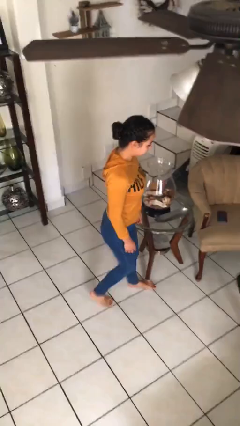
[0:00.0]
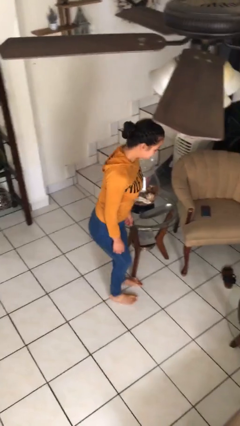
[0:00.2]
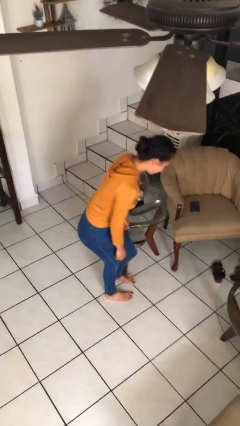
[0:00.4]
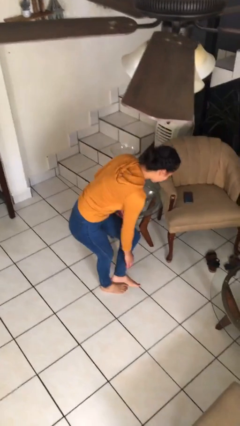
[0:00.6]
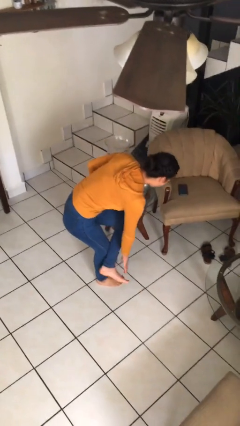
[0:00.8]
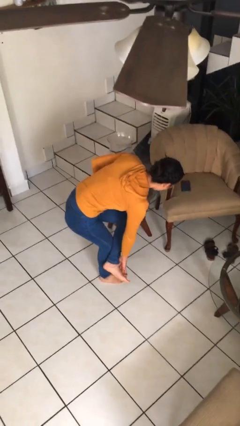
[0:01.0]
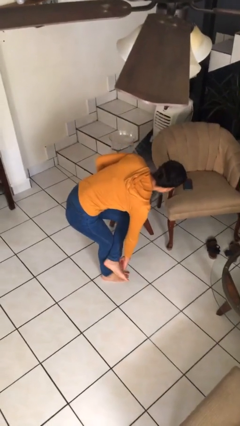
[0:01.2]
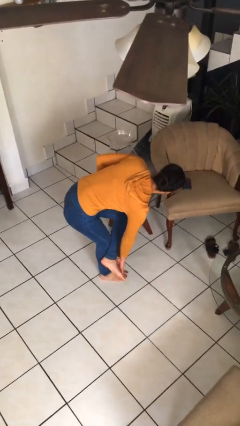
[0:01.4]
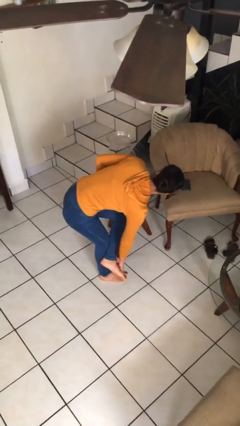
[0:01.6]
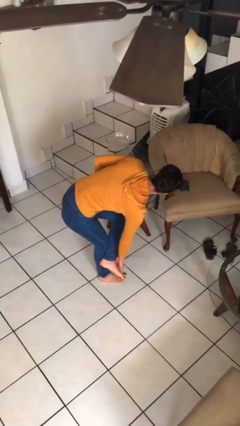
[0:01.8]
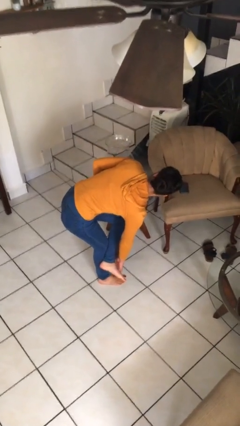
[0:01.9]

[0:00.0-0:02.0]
person stubs toe

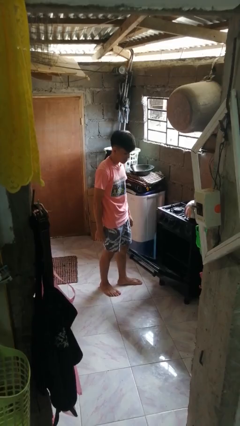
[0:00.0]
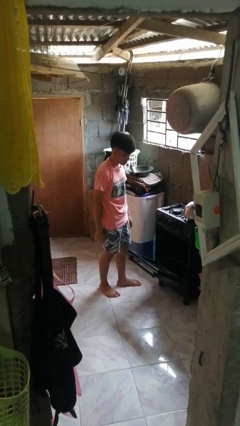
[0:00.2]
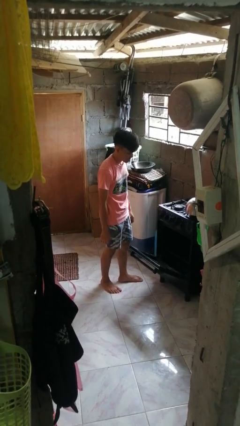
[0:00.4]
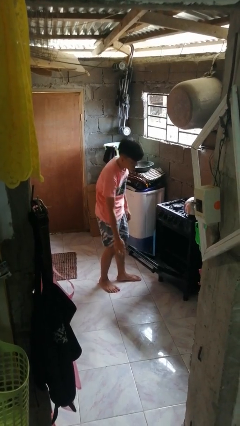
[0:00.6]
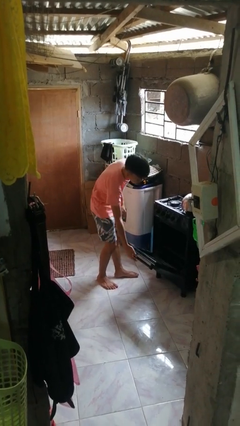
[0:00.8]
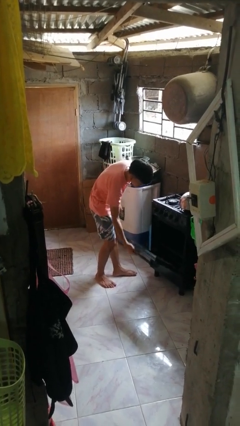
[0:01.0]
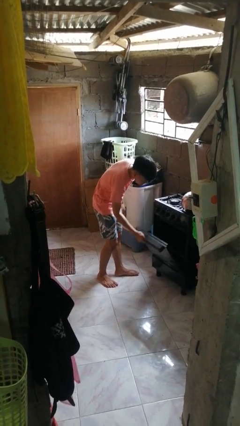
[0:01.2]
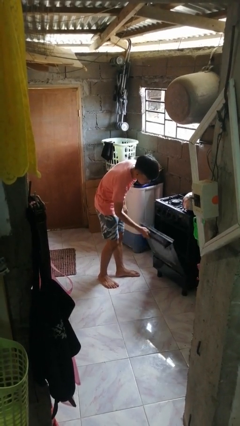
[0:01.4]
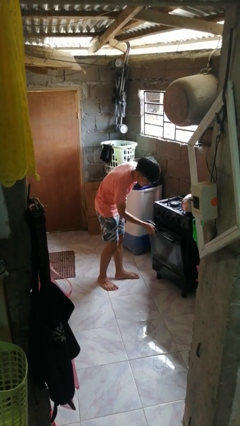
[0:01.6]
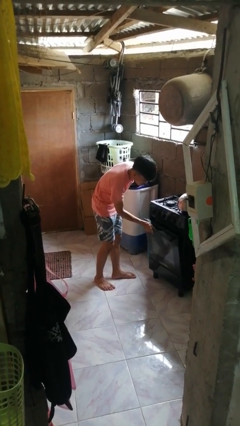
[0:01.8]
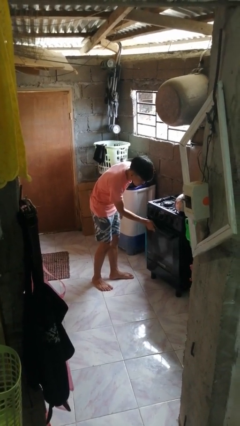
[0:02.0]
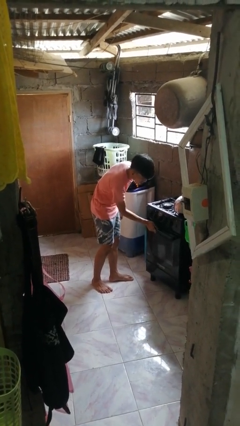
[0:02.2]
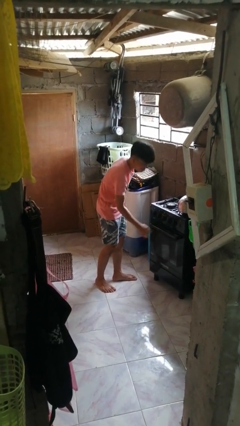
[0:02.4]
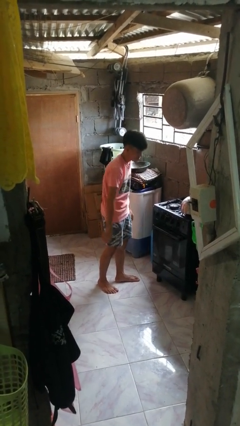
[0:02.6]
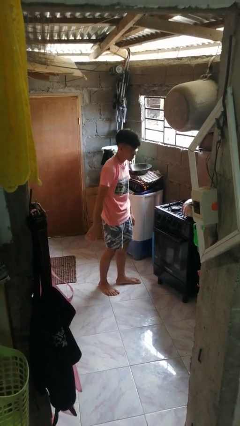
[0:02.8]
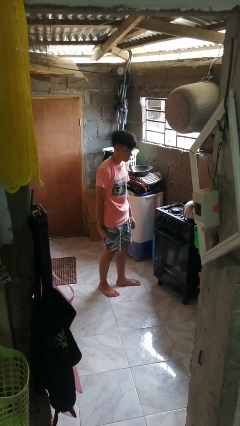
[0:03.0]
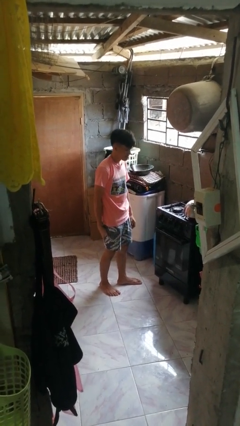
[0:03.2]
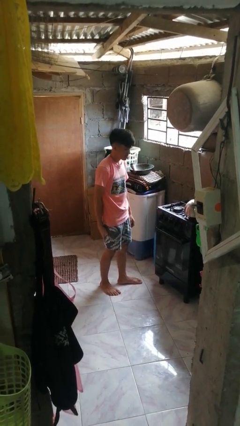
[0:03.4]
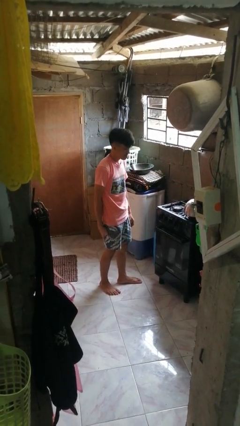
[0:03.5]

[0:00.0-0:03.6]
person closes oven door

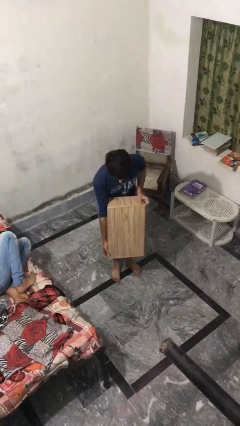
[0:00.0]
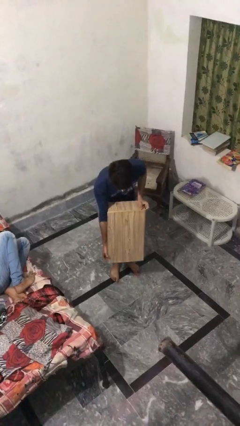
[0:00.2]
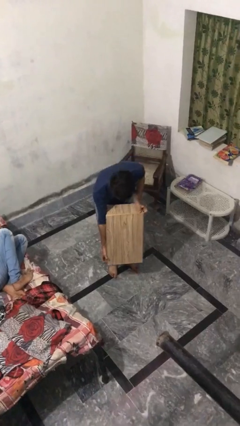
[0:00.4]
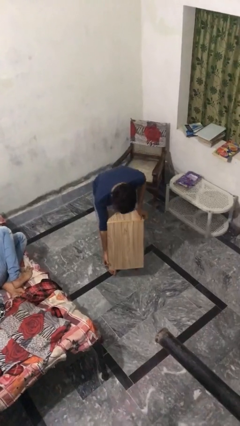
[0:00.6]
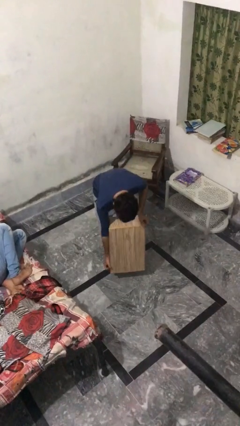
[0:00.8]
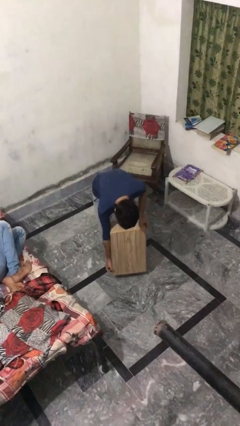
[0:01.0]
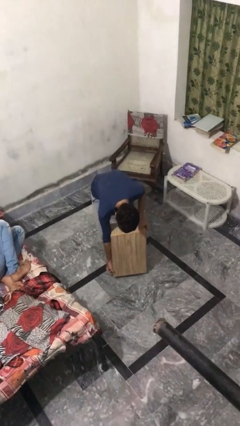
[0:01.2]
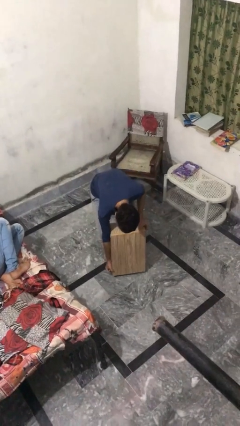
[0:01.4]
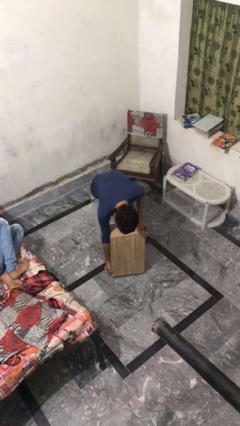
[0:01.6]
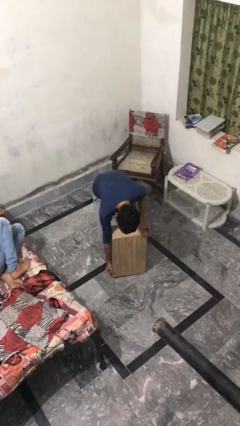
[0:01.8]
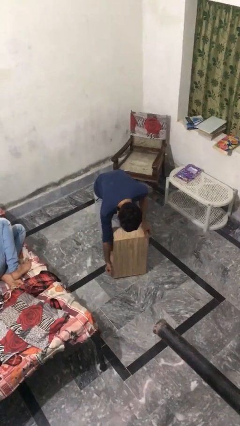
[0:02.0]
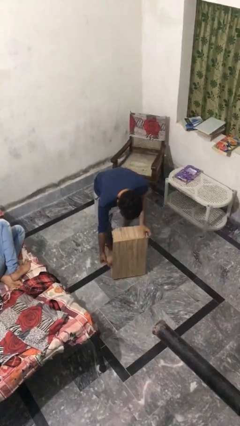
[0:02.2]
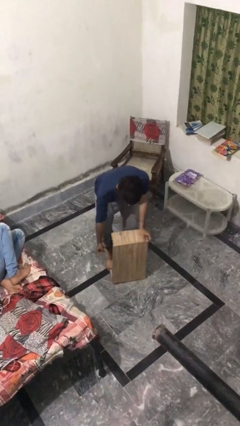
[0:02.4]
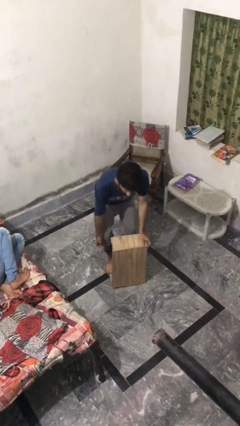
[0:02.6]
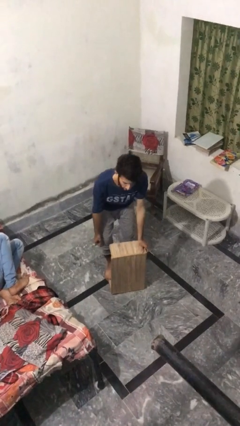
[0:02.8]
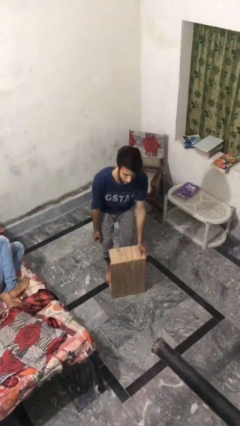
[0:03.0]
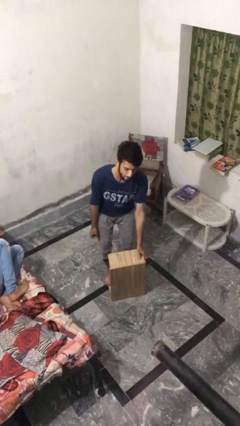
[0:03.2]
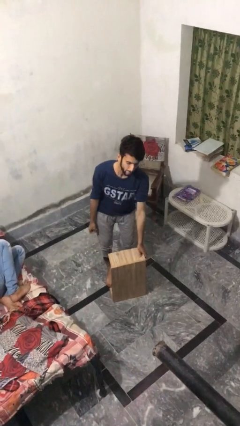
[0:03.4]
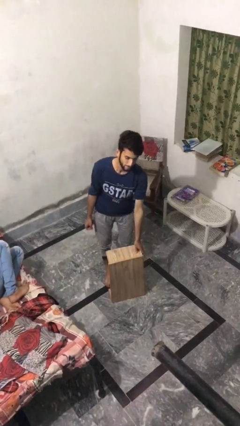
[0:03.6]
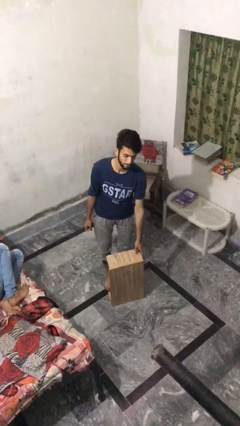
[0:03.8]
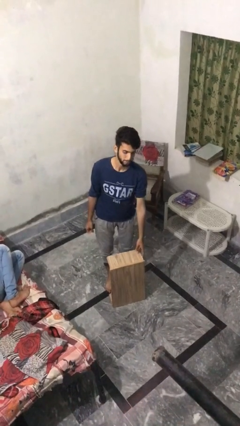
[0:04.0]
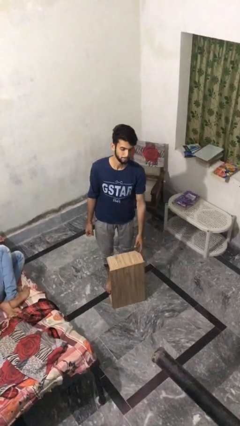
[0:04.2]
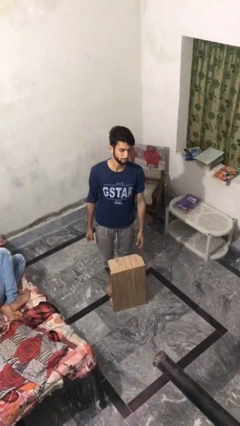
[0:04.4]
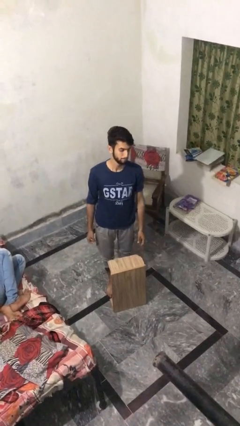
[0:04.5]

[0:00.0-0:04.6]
person puts down object on floor

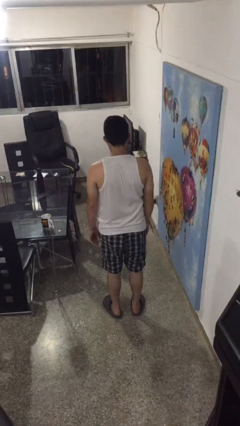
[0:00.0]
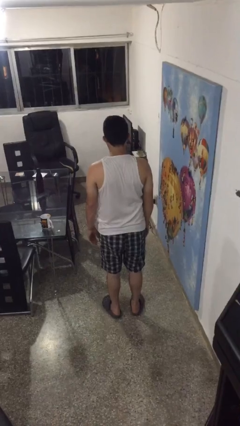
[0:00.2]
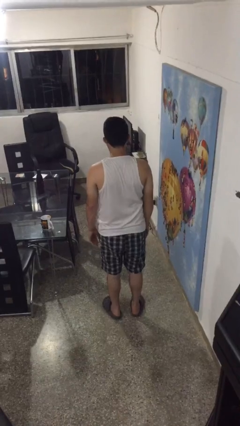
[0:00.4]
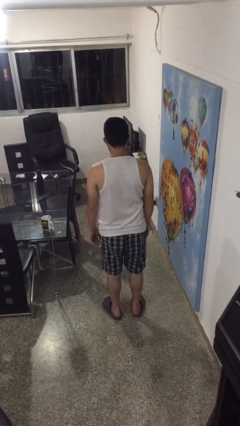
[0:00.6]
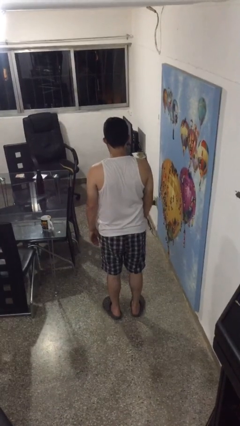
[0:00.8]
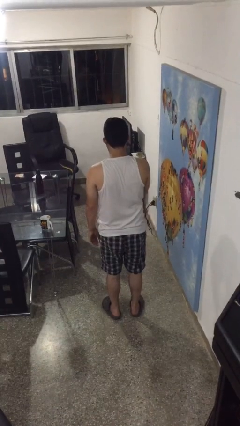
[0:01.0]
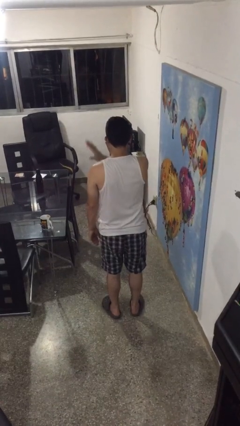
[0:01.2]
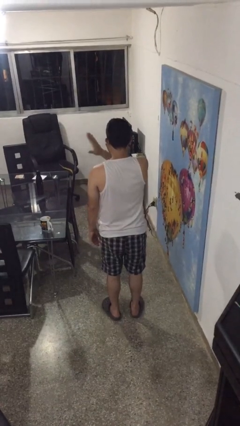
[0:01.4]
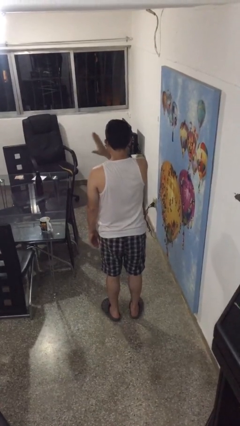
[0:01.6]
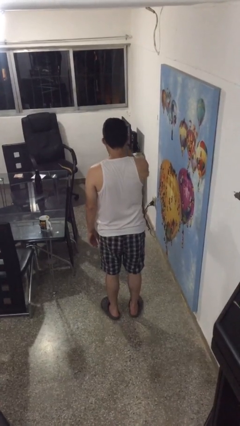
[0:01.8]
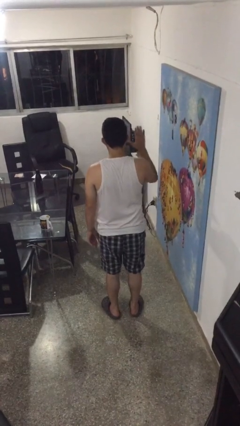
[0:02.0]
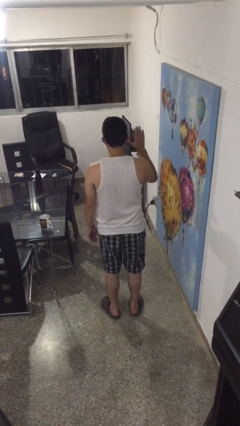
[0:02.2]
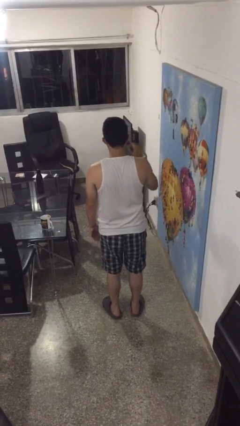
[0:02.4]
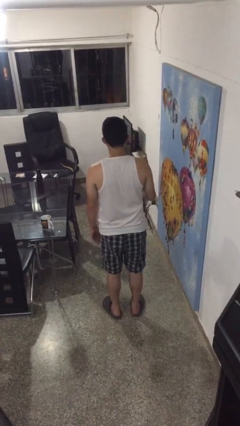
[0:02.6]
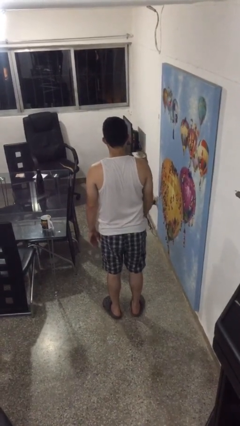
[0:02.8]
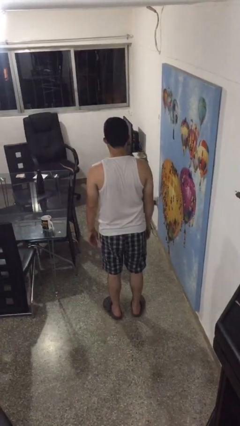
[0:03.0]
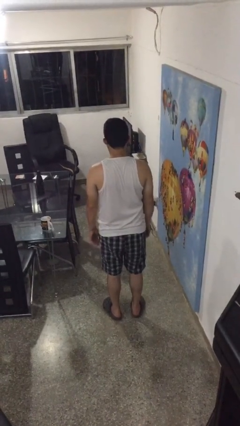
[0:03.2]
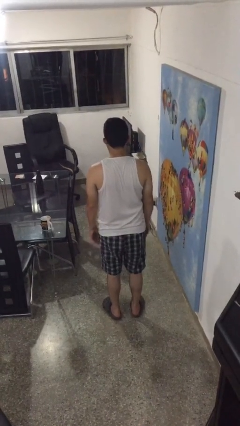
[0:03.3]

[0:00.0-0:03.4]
person gestures swipe right

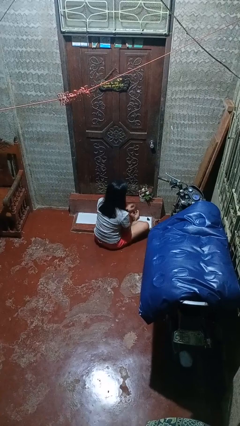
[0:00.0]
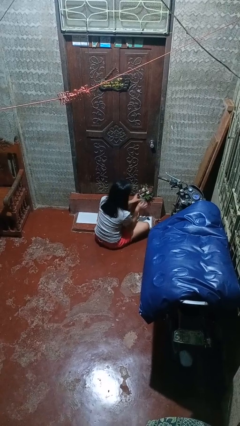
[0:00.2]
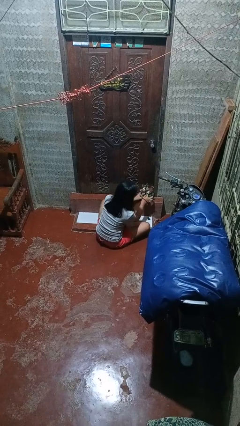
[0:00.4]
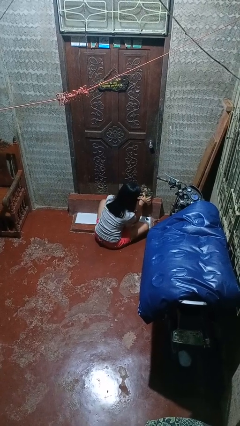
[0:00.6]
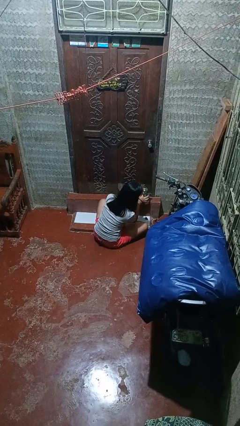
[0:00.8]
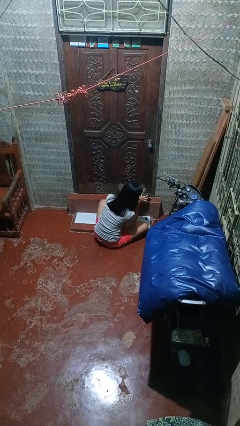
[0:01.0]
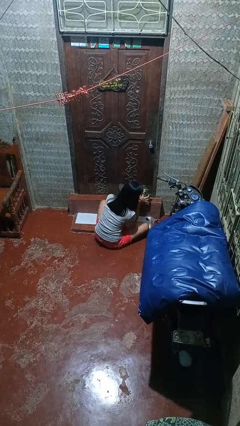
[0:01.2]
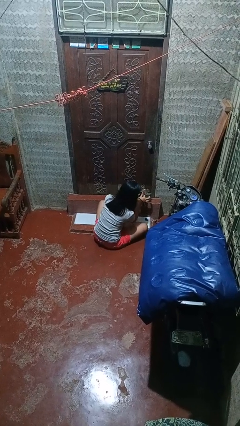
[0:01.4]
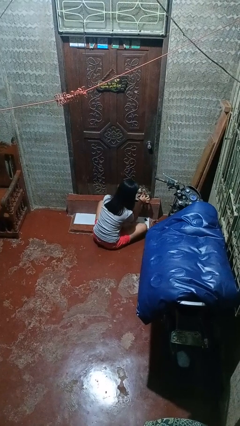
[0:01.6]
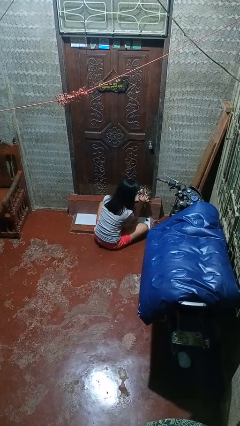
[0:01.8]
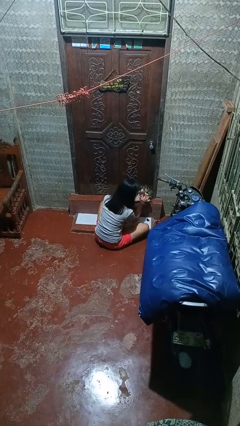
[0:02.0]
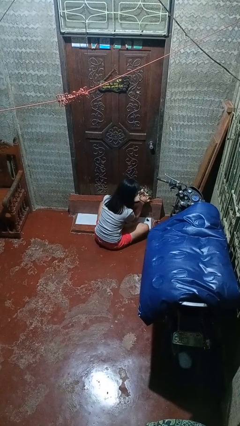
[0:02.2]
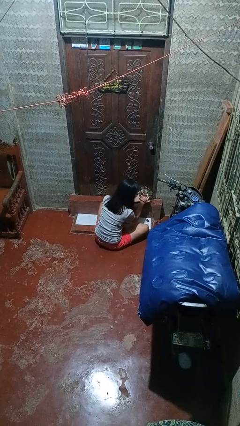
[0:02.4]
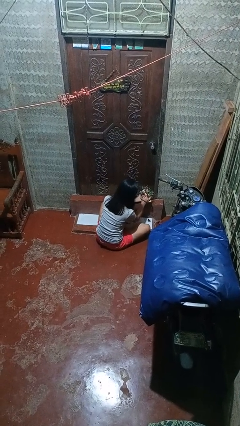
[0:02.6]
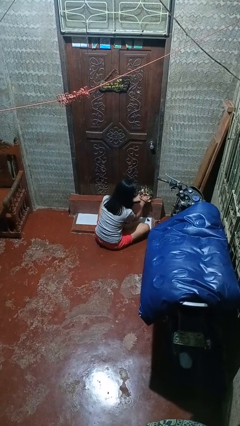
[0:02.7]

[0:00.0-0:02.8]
person arranges flowers in vase

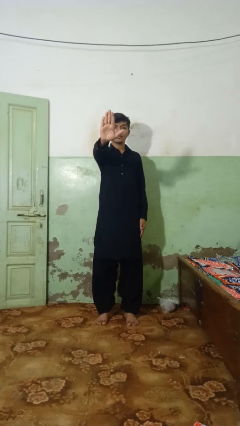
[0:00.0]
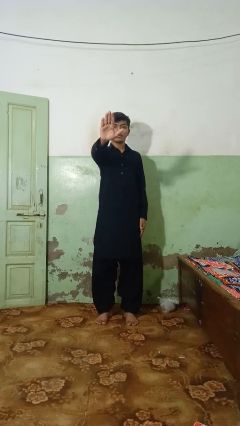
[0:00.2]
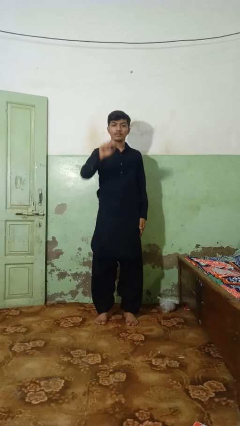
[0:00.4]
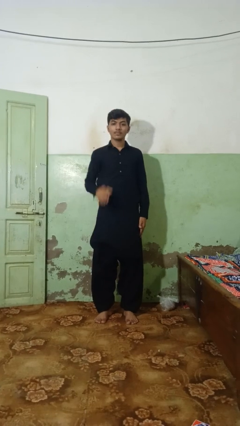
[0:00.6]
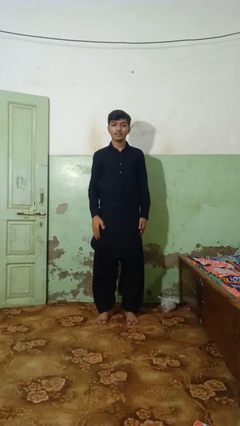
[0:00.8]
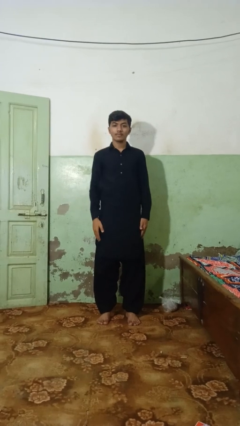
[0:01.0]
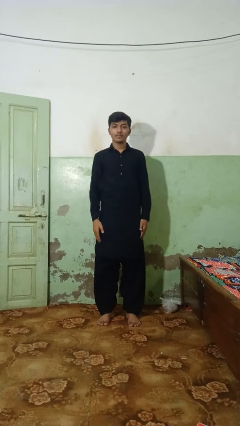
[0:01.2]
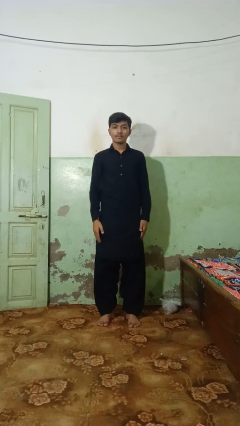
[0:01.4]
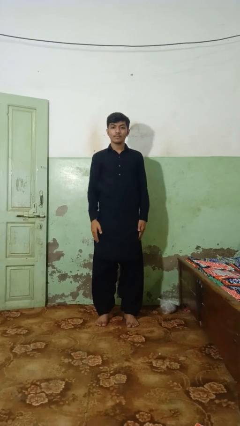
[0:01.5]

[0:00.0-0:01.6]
person gestures stop
